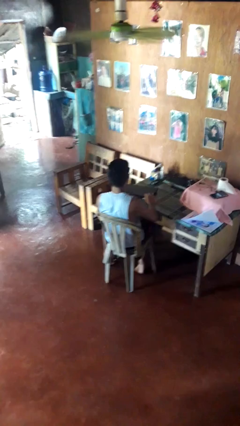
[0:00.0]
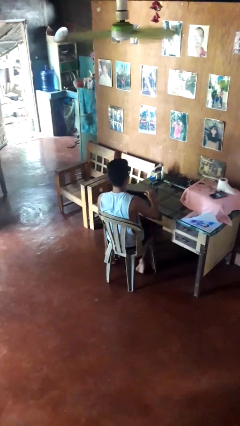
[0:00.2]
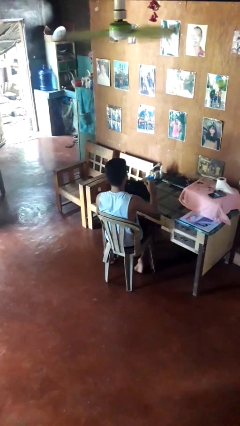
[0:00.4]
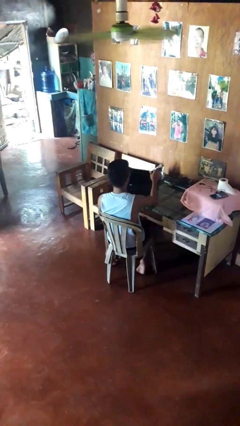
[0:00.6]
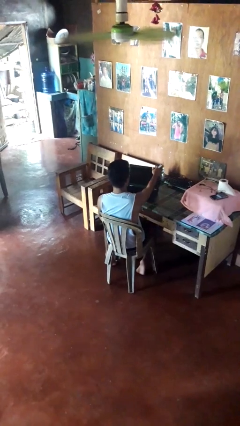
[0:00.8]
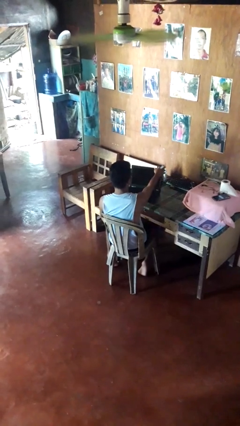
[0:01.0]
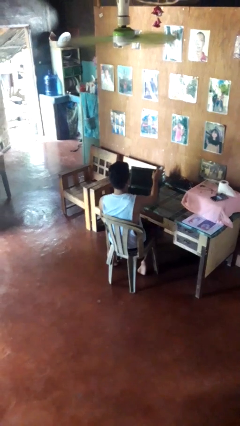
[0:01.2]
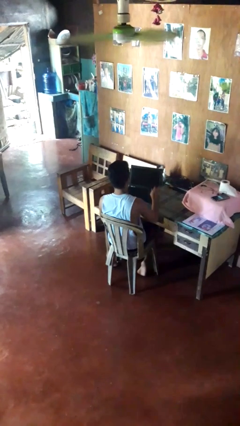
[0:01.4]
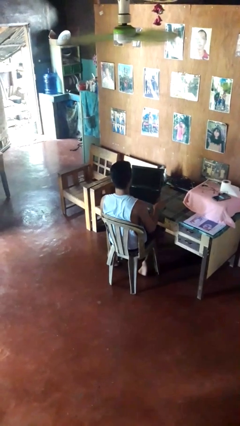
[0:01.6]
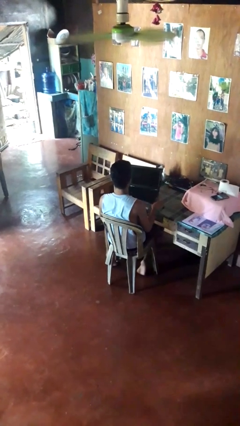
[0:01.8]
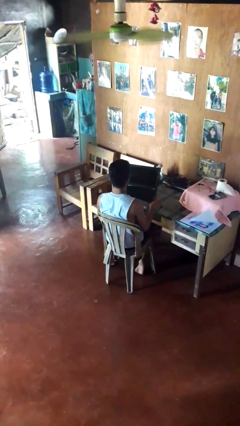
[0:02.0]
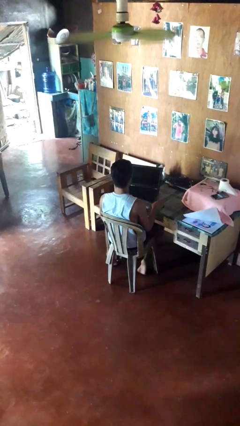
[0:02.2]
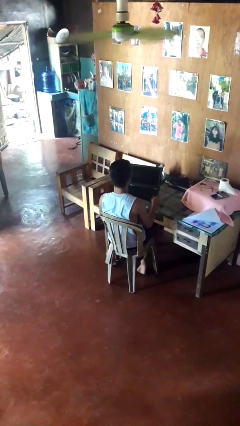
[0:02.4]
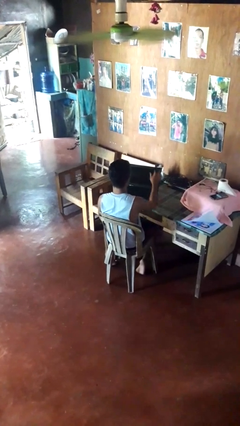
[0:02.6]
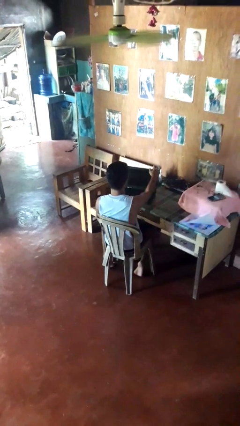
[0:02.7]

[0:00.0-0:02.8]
person opens laptop

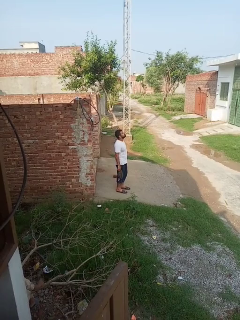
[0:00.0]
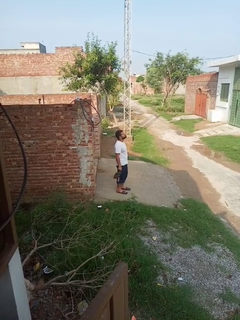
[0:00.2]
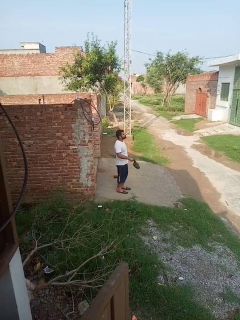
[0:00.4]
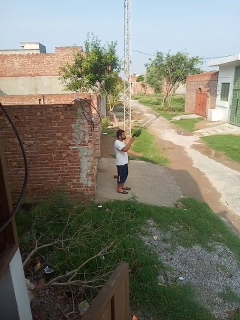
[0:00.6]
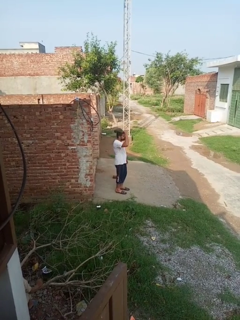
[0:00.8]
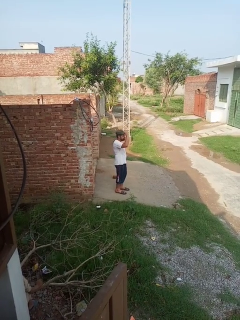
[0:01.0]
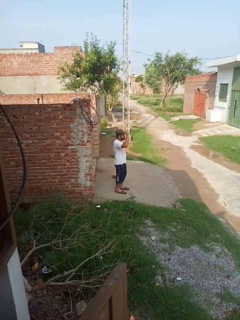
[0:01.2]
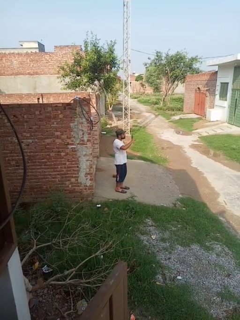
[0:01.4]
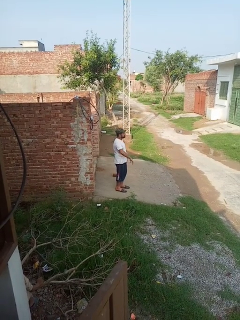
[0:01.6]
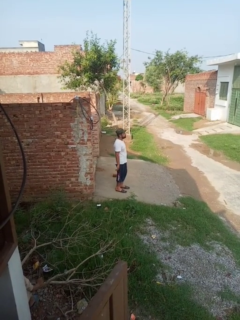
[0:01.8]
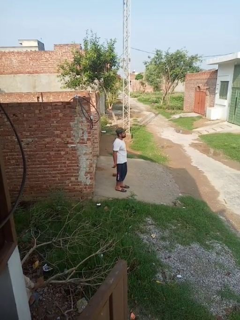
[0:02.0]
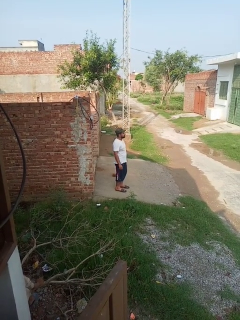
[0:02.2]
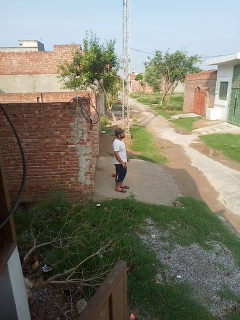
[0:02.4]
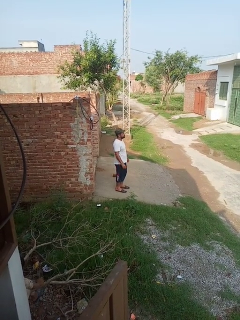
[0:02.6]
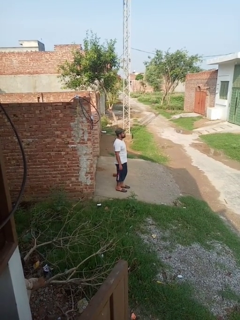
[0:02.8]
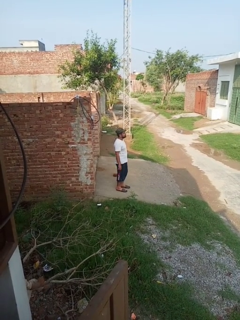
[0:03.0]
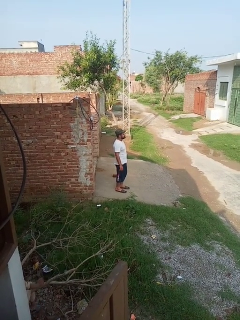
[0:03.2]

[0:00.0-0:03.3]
person puts on hat

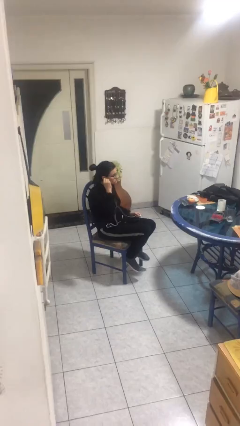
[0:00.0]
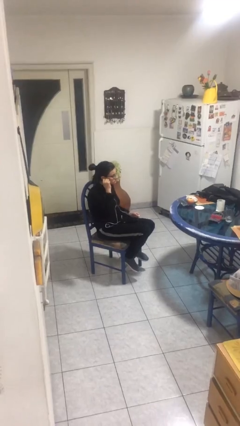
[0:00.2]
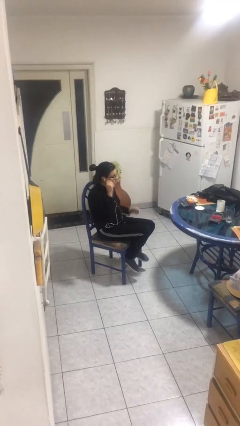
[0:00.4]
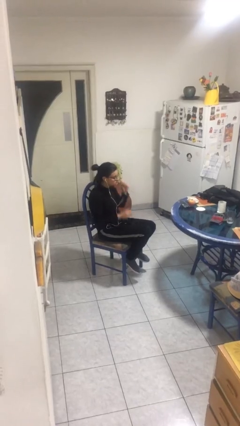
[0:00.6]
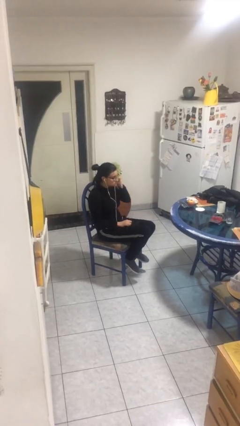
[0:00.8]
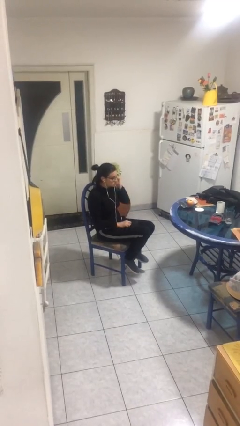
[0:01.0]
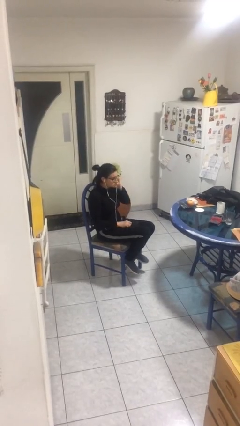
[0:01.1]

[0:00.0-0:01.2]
person puts on headphones

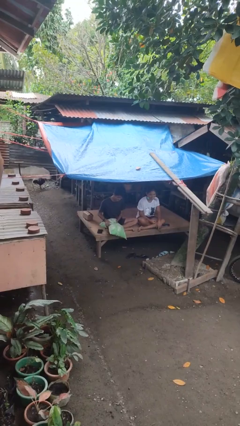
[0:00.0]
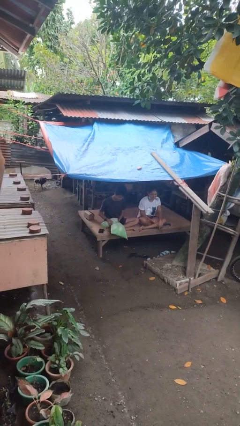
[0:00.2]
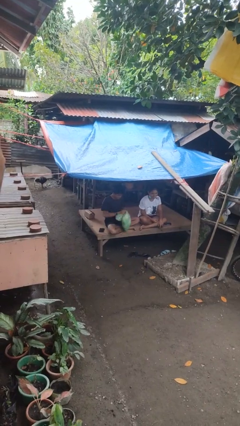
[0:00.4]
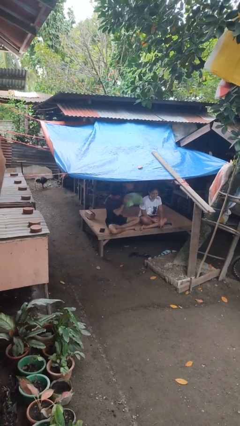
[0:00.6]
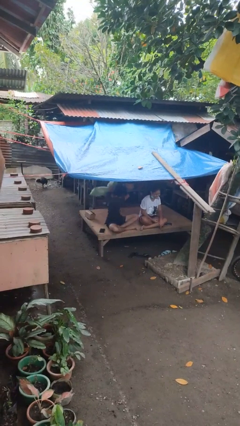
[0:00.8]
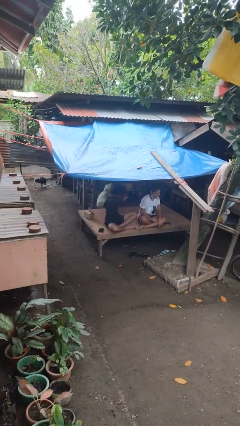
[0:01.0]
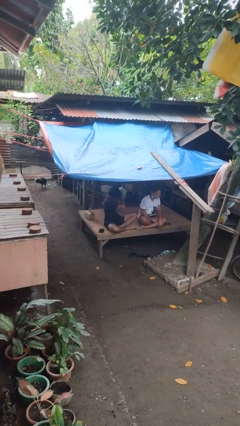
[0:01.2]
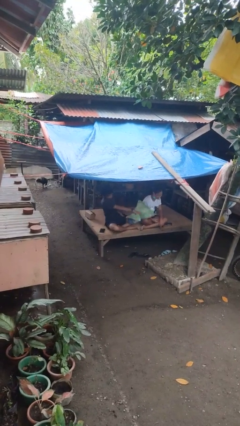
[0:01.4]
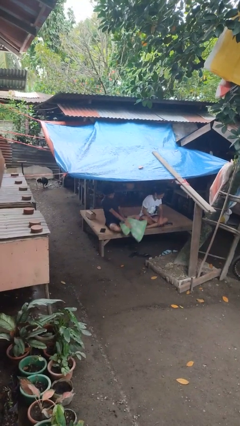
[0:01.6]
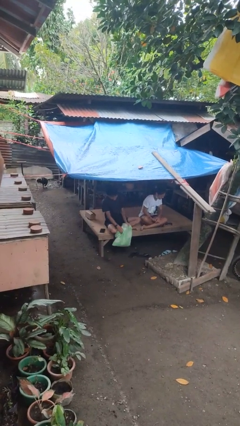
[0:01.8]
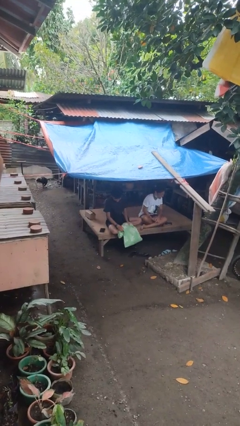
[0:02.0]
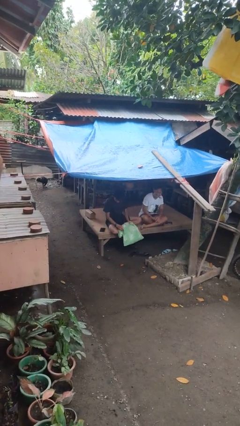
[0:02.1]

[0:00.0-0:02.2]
person hits person with pillow

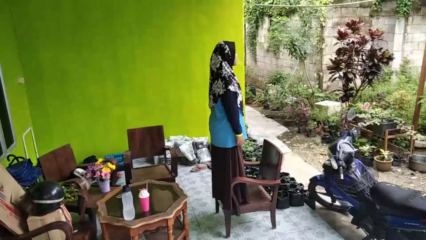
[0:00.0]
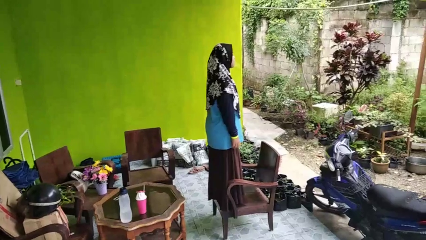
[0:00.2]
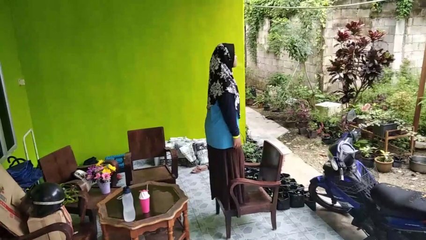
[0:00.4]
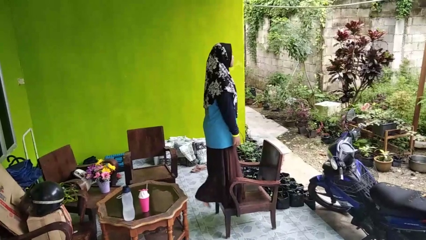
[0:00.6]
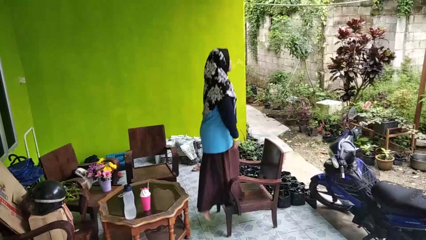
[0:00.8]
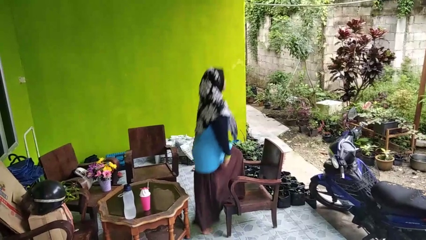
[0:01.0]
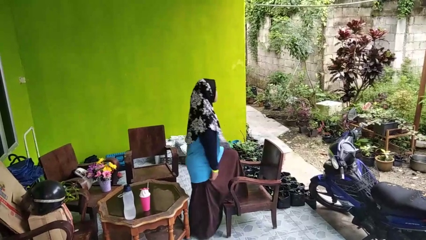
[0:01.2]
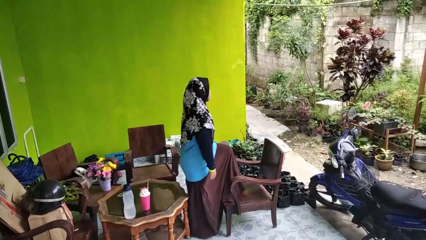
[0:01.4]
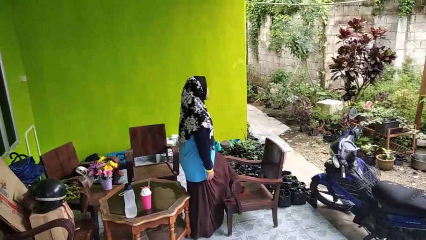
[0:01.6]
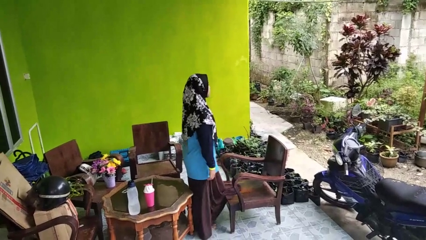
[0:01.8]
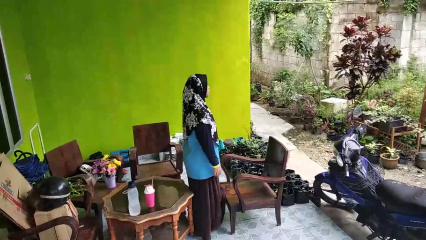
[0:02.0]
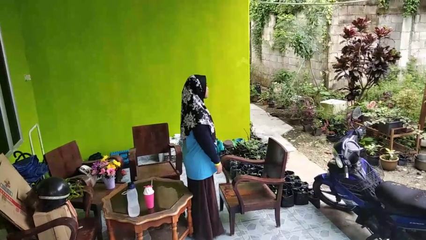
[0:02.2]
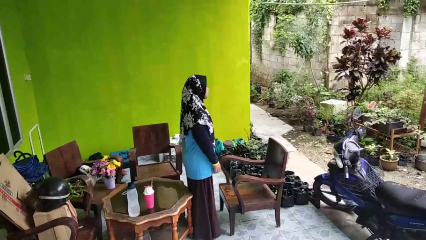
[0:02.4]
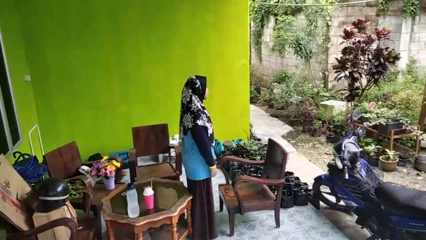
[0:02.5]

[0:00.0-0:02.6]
person climbs off chair

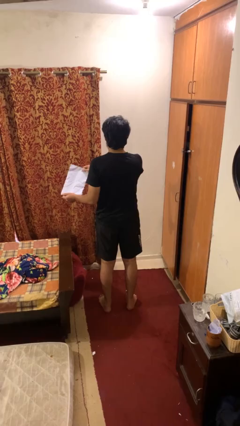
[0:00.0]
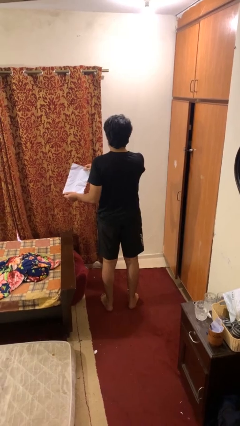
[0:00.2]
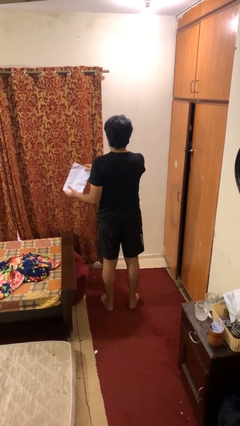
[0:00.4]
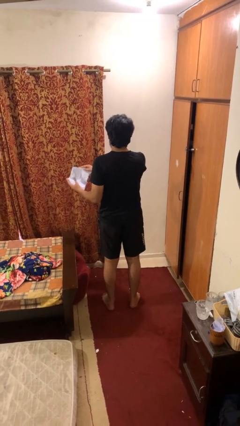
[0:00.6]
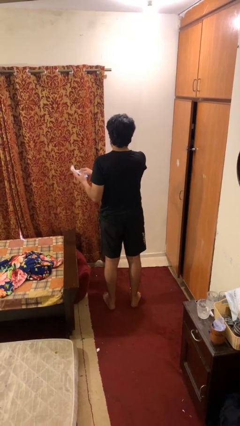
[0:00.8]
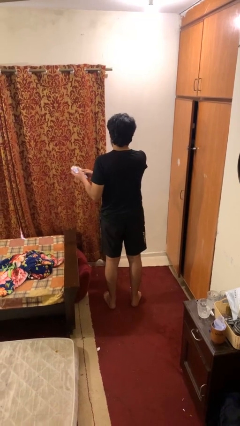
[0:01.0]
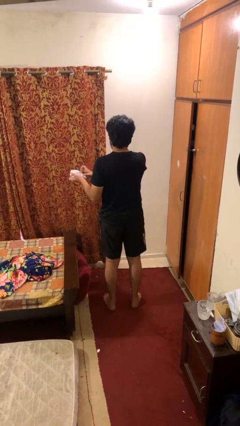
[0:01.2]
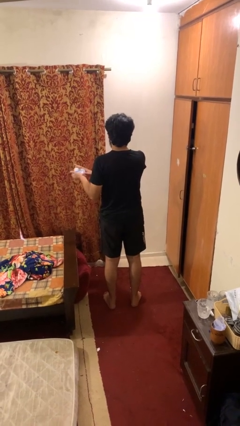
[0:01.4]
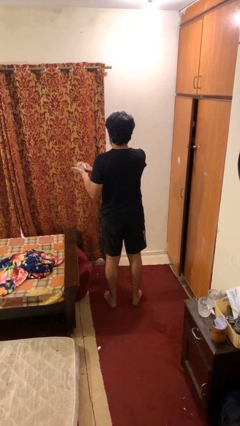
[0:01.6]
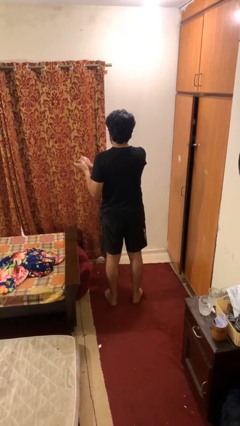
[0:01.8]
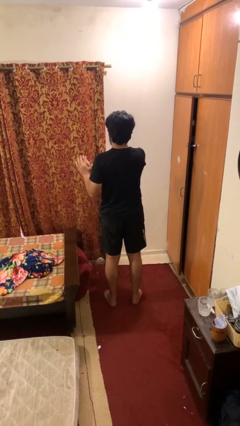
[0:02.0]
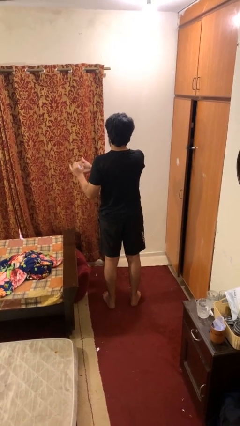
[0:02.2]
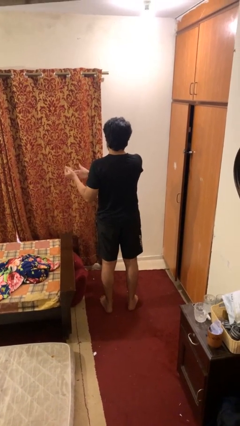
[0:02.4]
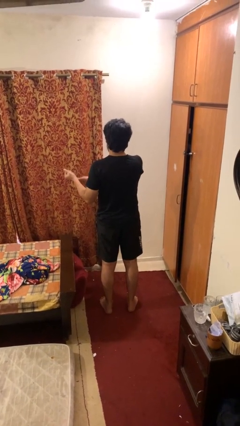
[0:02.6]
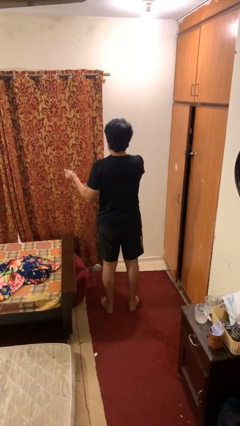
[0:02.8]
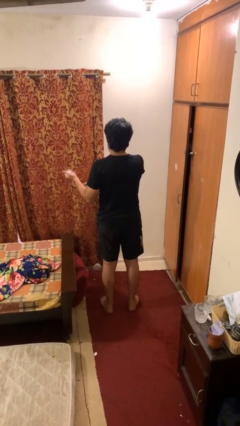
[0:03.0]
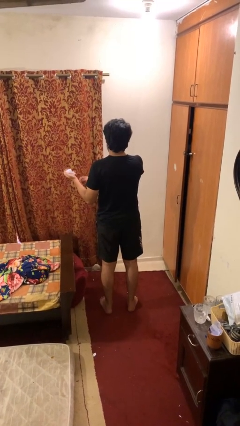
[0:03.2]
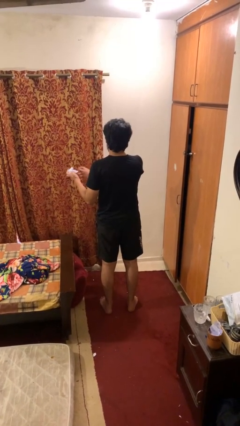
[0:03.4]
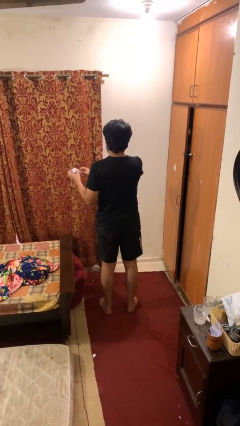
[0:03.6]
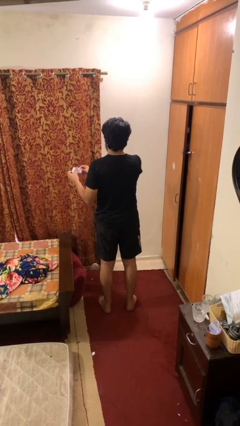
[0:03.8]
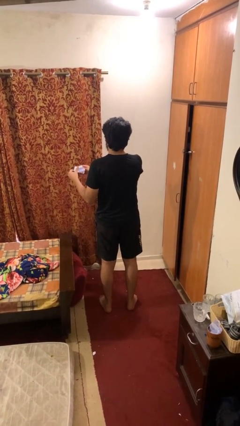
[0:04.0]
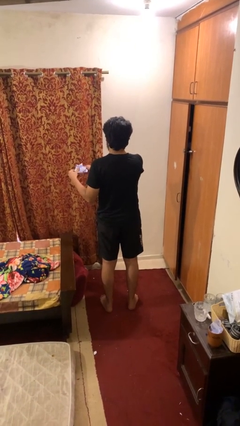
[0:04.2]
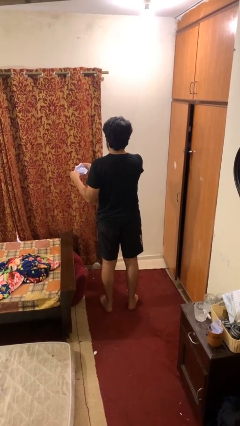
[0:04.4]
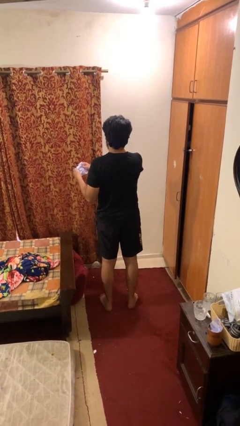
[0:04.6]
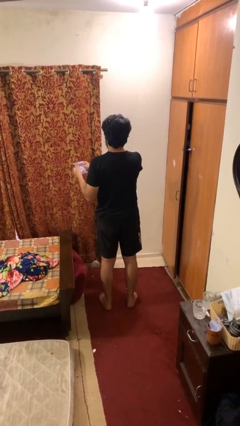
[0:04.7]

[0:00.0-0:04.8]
person crumples paper

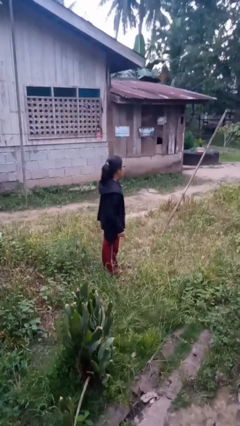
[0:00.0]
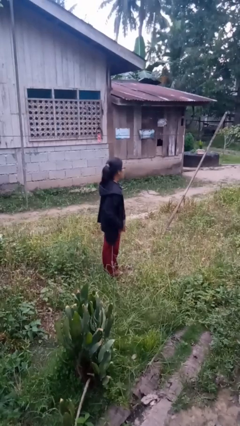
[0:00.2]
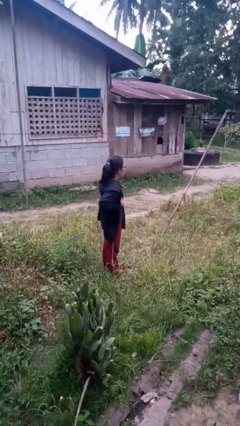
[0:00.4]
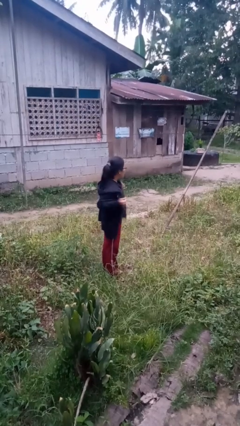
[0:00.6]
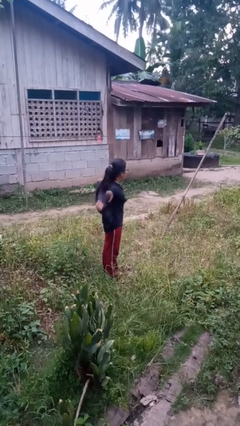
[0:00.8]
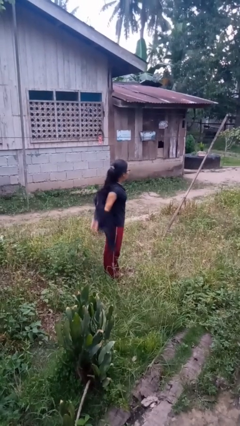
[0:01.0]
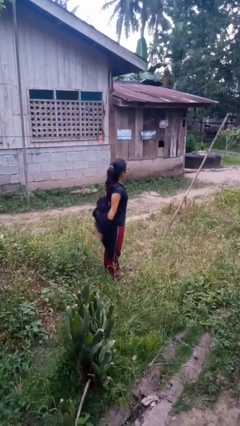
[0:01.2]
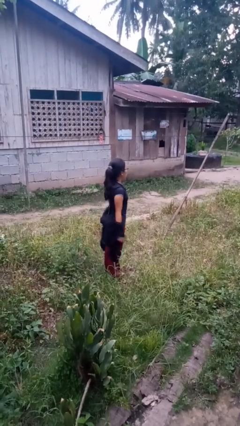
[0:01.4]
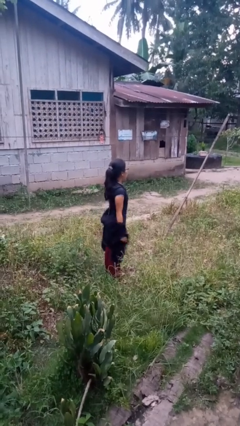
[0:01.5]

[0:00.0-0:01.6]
person takes off jacket
